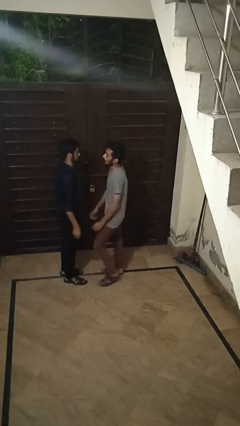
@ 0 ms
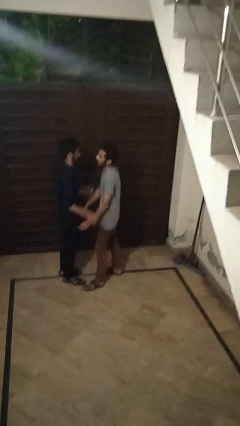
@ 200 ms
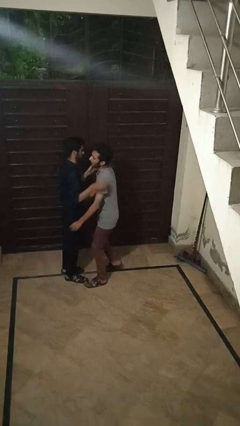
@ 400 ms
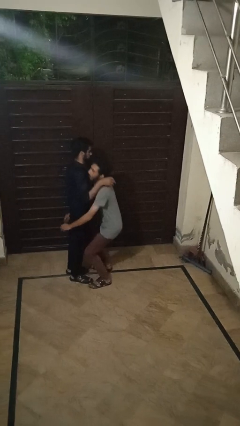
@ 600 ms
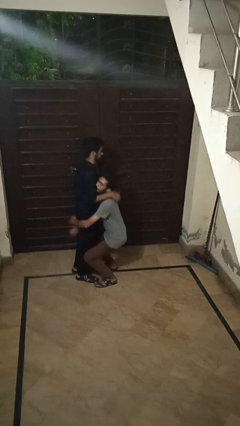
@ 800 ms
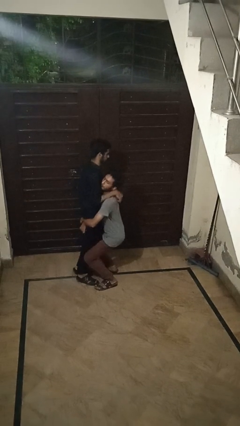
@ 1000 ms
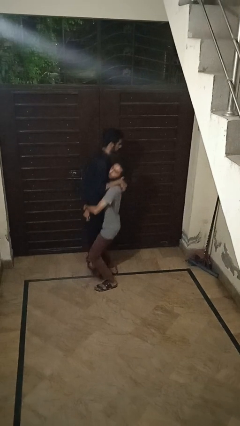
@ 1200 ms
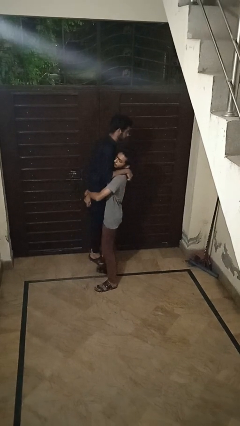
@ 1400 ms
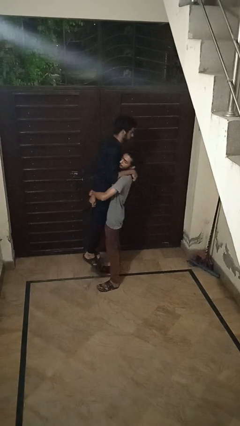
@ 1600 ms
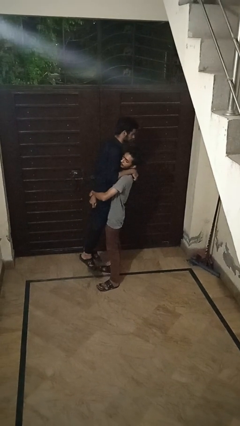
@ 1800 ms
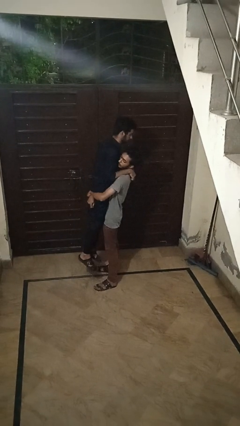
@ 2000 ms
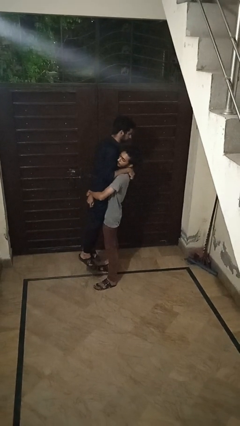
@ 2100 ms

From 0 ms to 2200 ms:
person picks up person

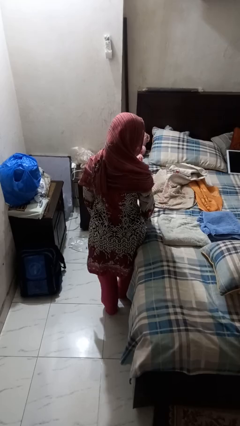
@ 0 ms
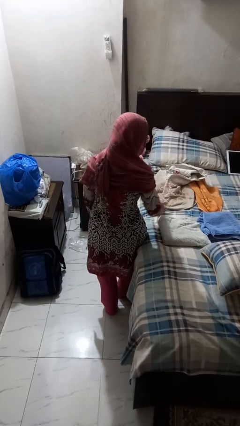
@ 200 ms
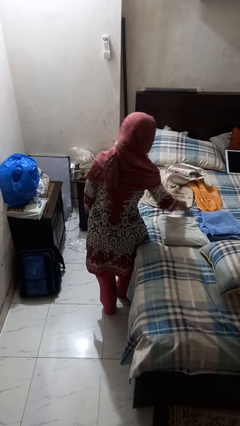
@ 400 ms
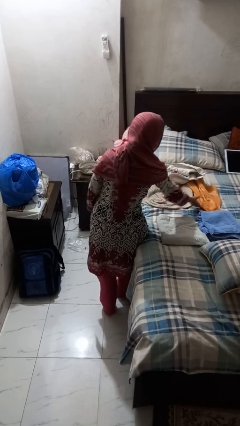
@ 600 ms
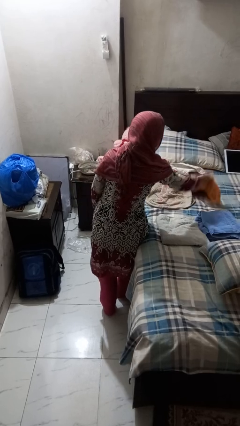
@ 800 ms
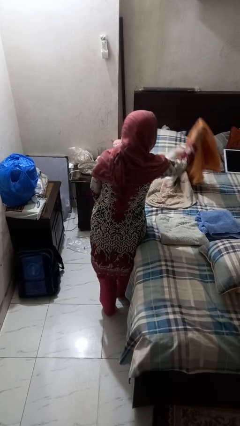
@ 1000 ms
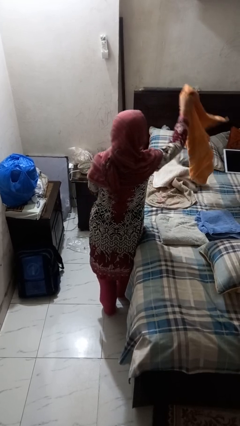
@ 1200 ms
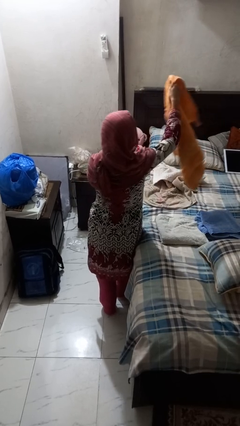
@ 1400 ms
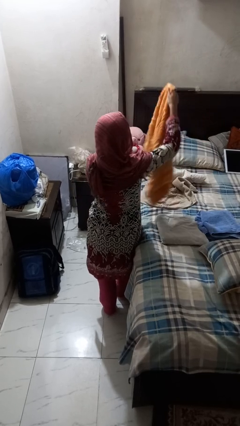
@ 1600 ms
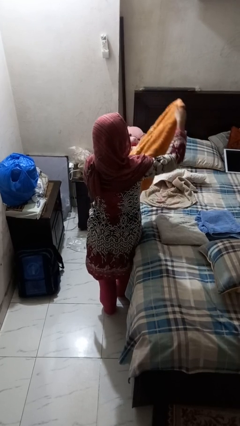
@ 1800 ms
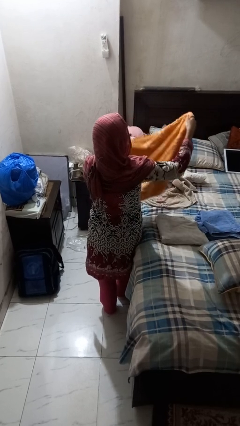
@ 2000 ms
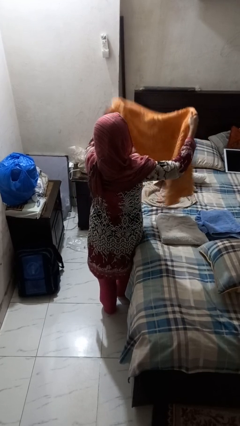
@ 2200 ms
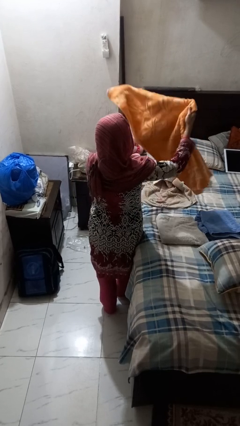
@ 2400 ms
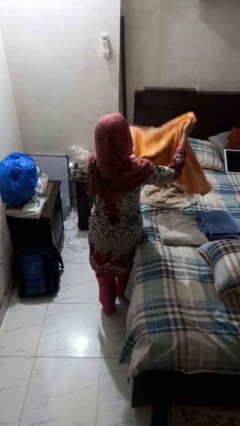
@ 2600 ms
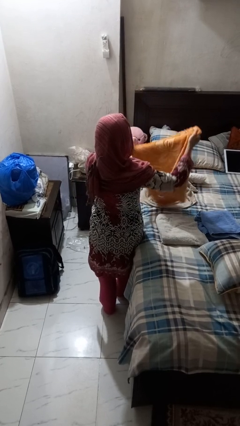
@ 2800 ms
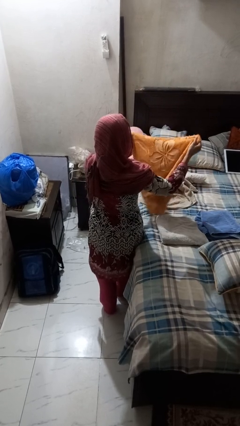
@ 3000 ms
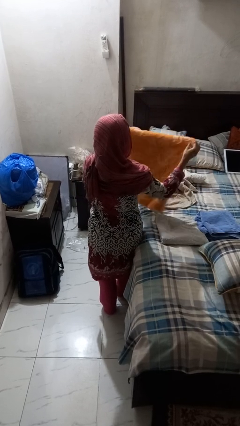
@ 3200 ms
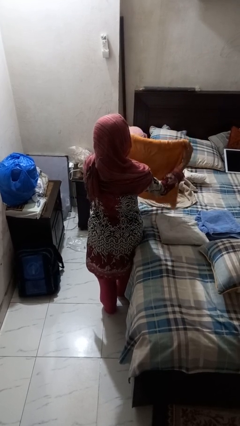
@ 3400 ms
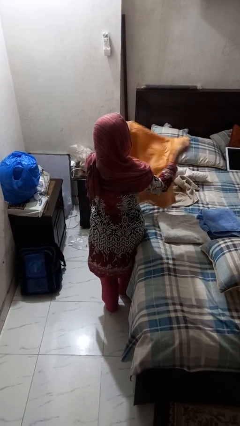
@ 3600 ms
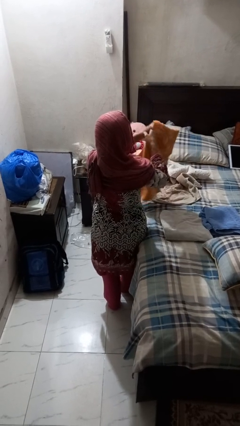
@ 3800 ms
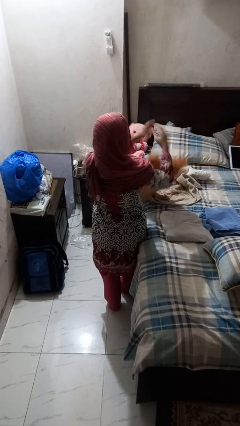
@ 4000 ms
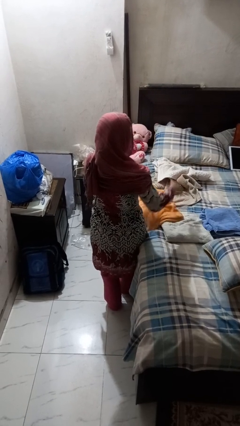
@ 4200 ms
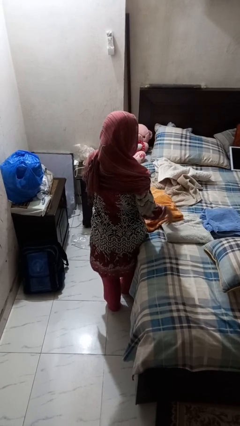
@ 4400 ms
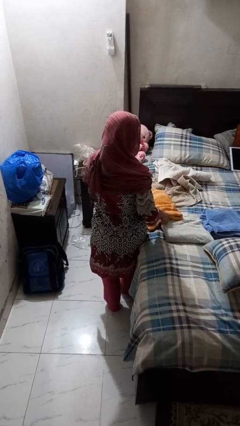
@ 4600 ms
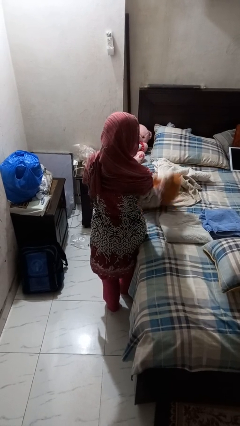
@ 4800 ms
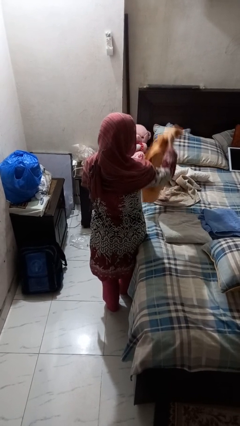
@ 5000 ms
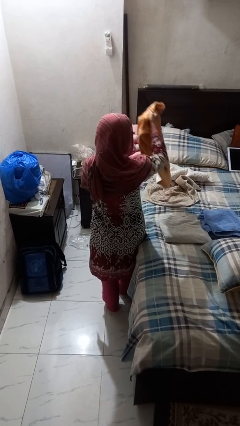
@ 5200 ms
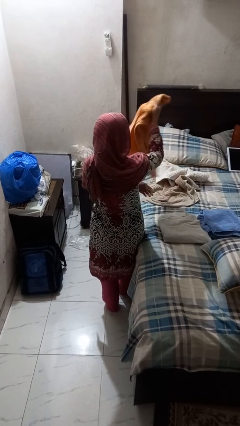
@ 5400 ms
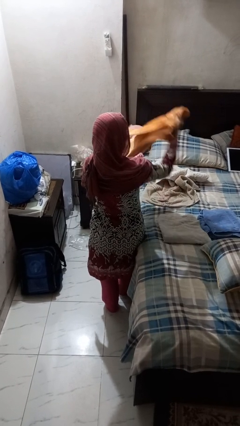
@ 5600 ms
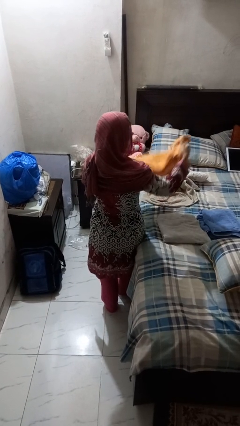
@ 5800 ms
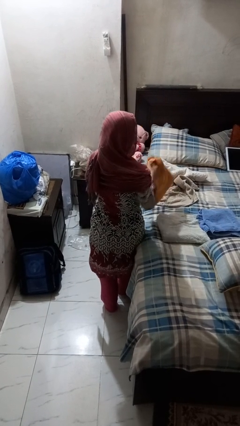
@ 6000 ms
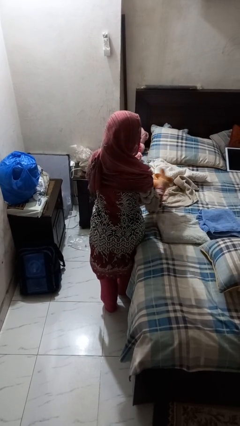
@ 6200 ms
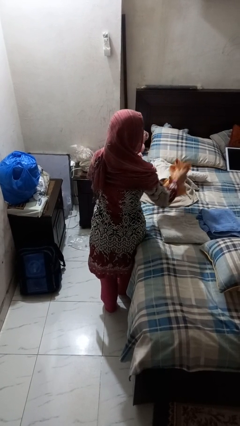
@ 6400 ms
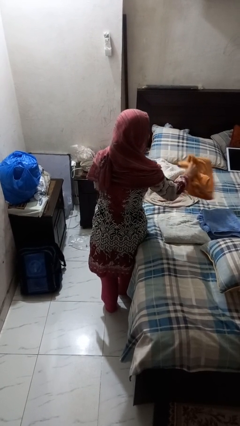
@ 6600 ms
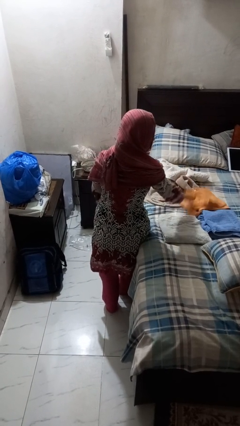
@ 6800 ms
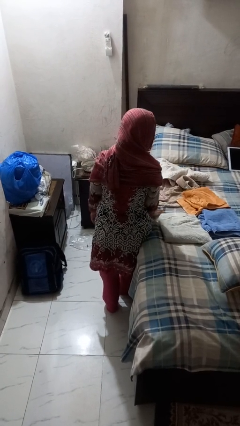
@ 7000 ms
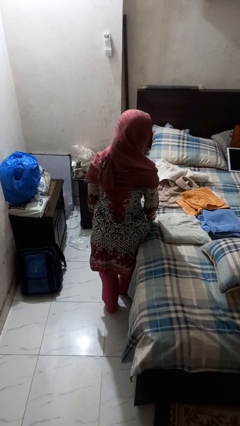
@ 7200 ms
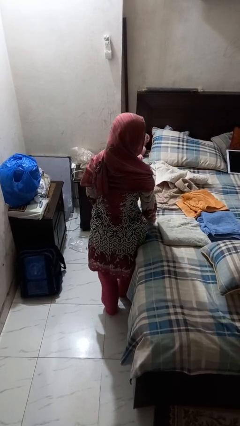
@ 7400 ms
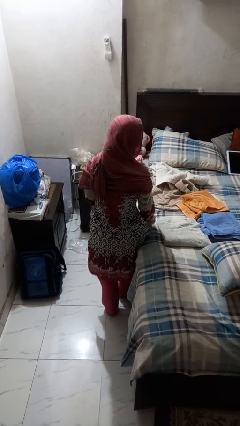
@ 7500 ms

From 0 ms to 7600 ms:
person folds towel

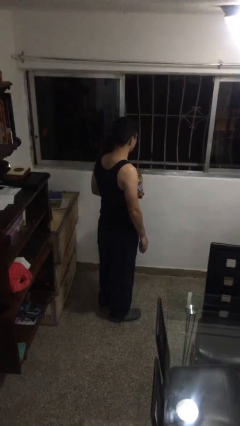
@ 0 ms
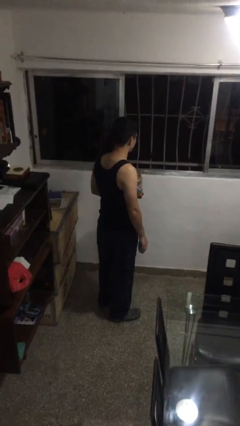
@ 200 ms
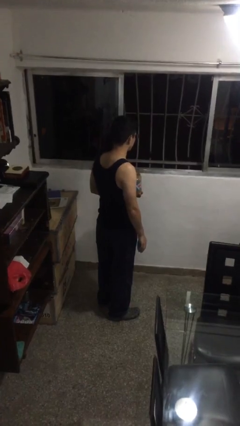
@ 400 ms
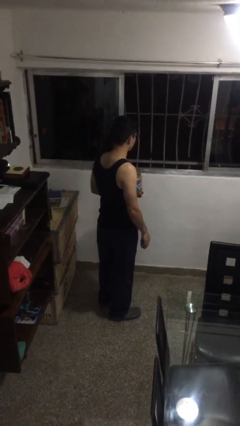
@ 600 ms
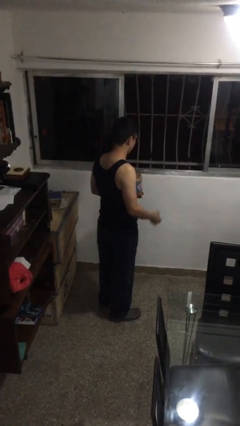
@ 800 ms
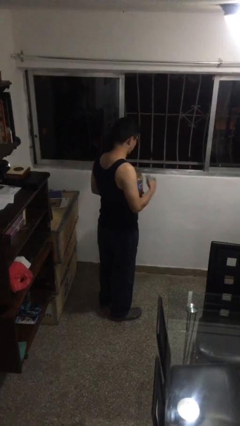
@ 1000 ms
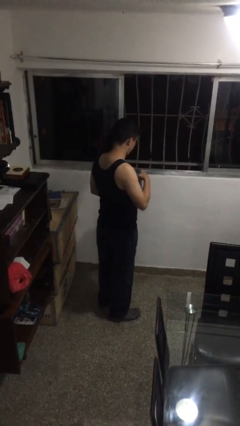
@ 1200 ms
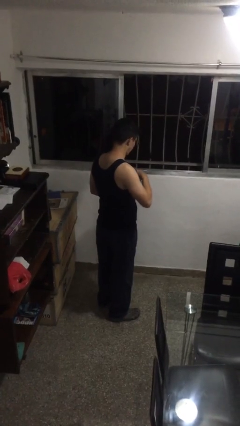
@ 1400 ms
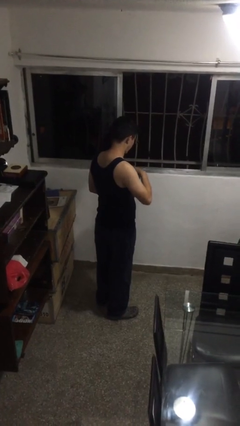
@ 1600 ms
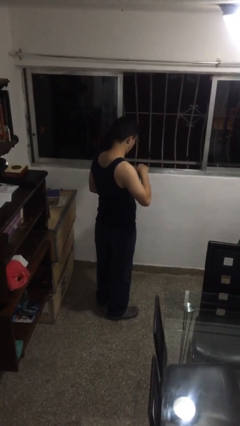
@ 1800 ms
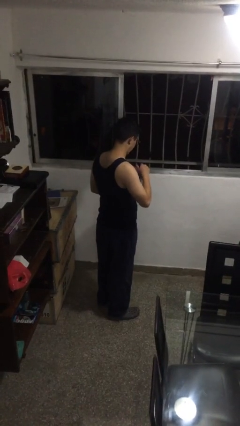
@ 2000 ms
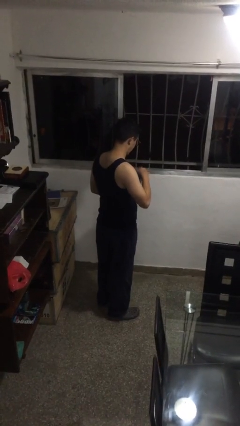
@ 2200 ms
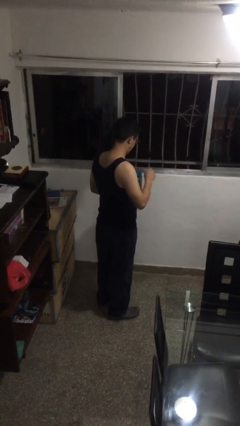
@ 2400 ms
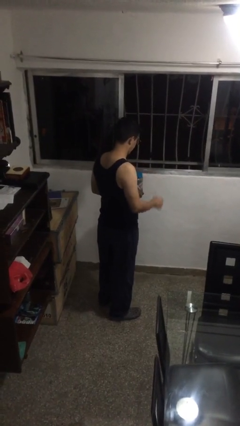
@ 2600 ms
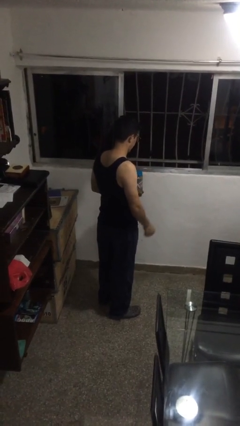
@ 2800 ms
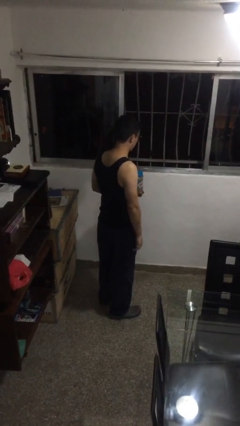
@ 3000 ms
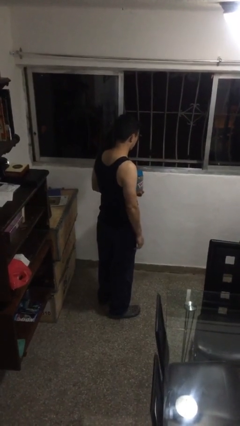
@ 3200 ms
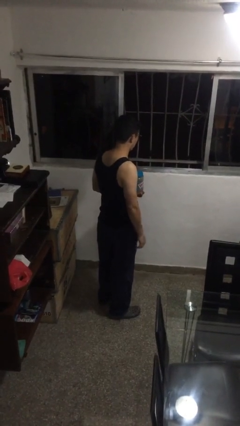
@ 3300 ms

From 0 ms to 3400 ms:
person closes jar

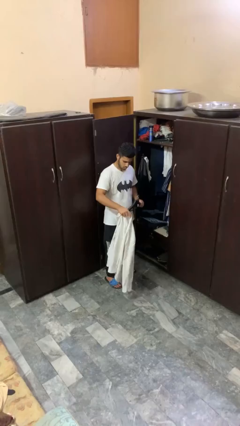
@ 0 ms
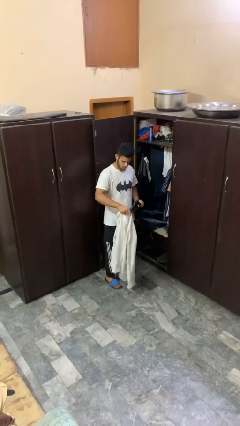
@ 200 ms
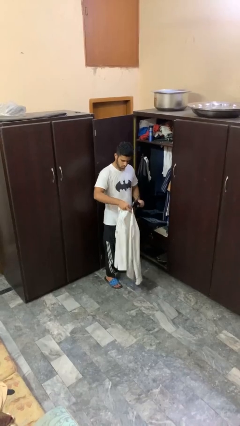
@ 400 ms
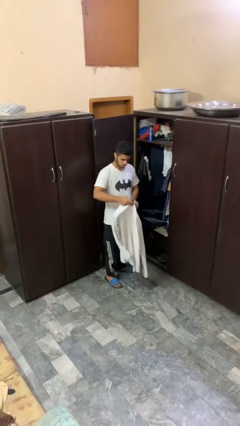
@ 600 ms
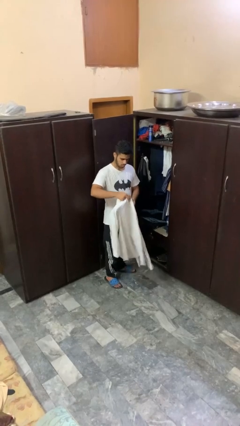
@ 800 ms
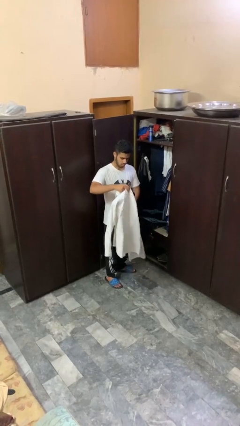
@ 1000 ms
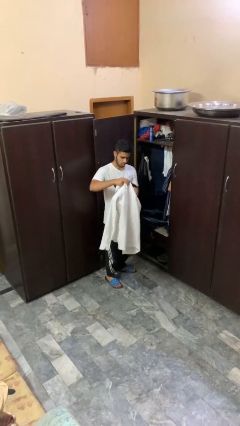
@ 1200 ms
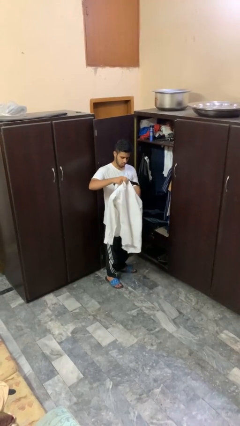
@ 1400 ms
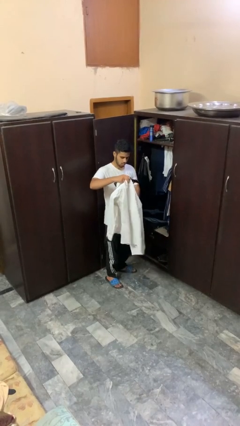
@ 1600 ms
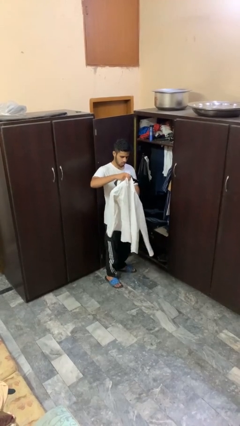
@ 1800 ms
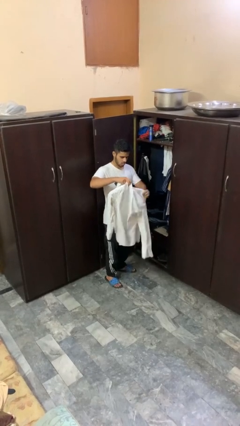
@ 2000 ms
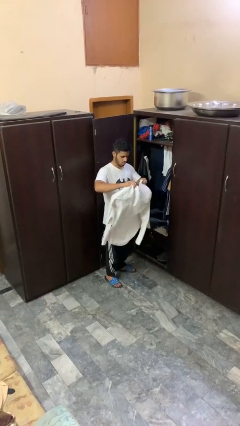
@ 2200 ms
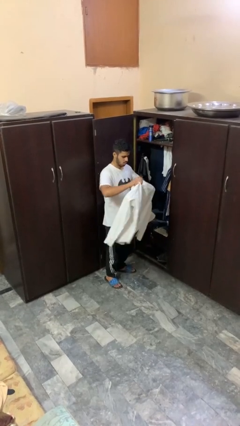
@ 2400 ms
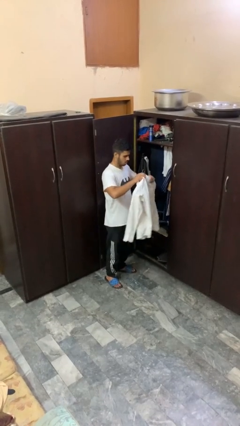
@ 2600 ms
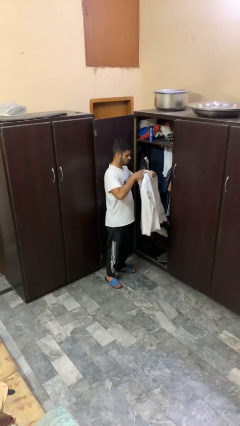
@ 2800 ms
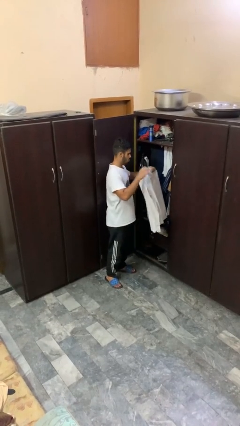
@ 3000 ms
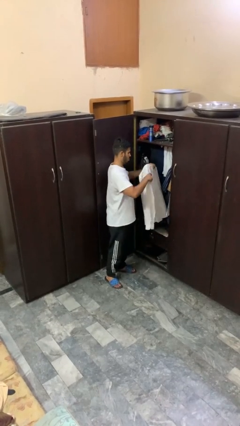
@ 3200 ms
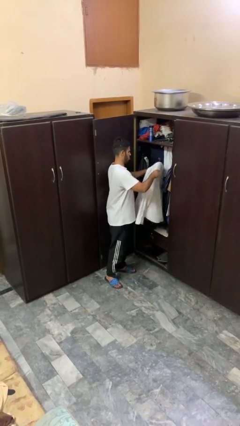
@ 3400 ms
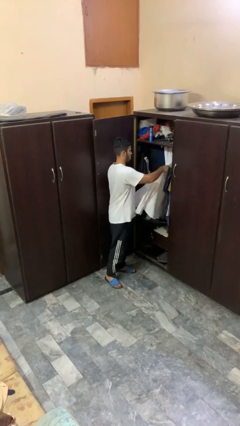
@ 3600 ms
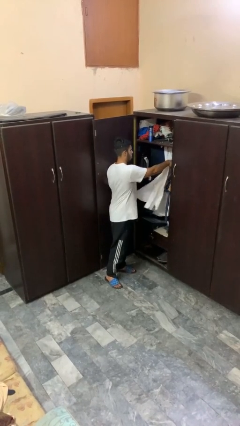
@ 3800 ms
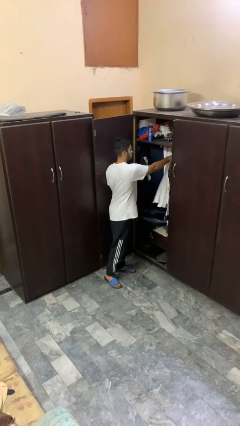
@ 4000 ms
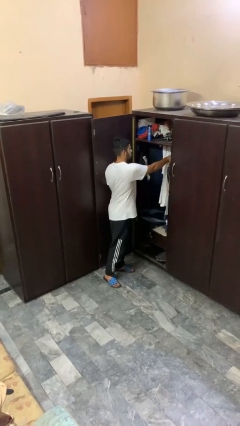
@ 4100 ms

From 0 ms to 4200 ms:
person puts clothes into closet
